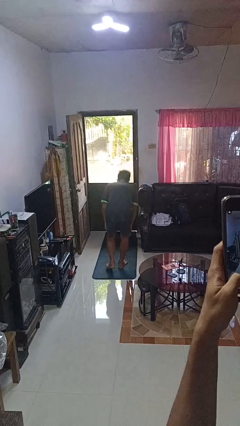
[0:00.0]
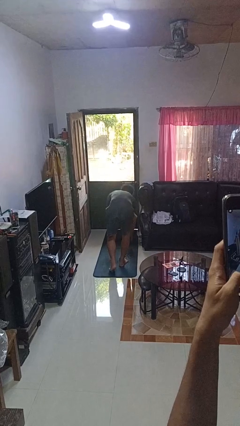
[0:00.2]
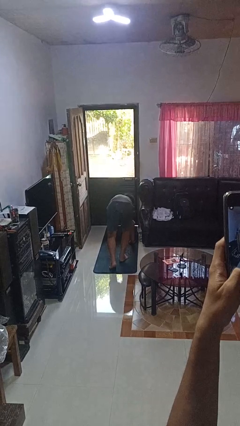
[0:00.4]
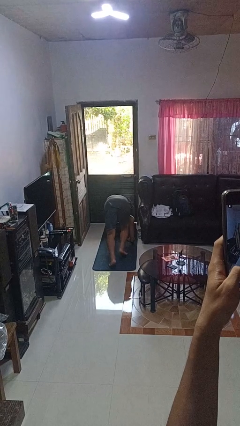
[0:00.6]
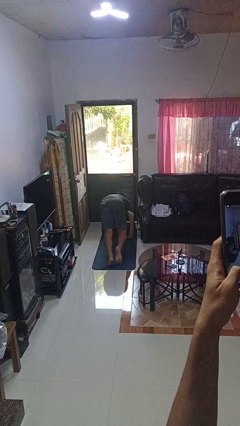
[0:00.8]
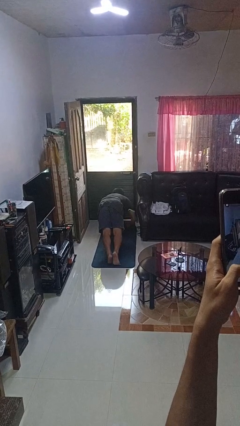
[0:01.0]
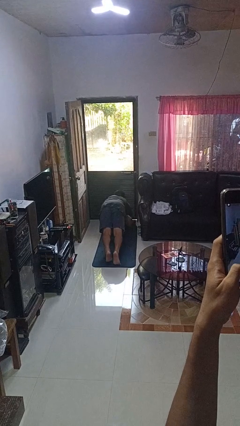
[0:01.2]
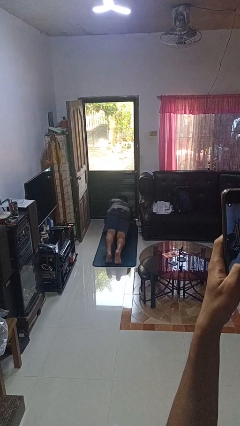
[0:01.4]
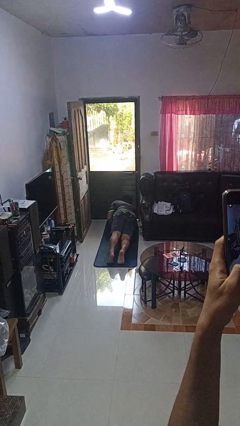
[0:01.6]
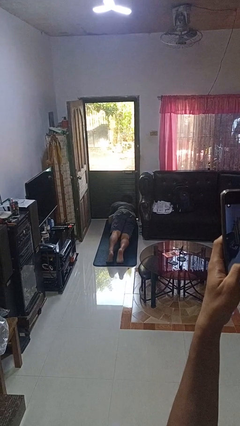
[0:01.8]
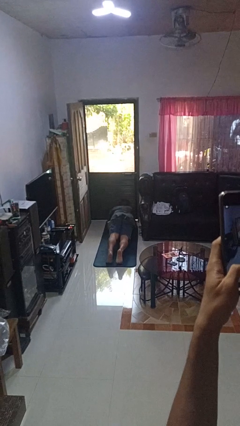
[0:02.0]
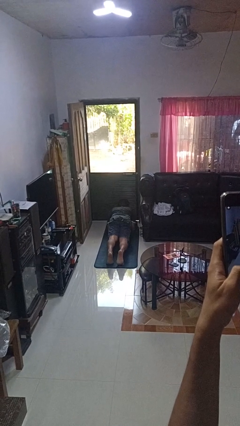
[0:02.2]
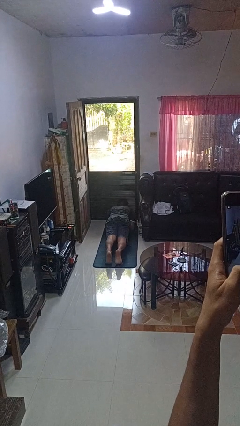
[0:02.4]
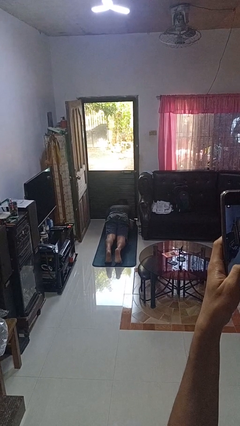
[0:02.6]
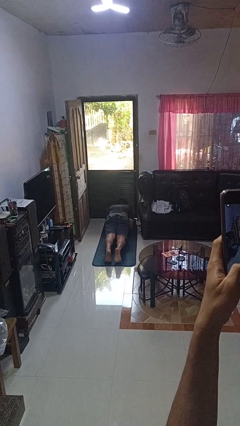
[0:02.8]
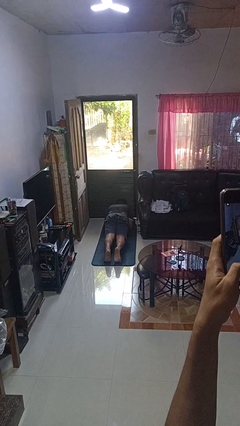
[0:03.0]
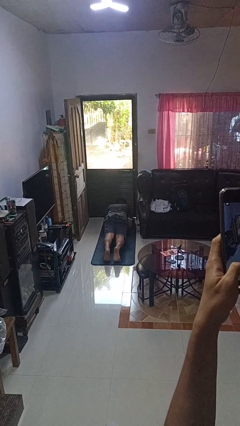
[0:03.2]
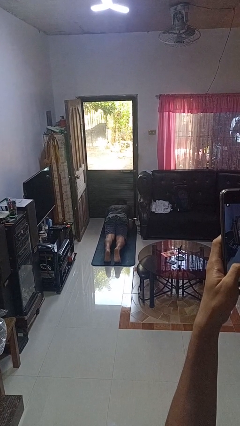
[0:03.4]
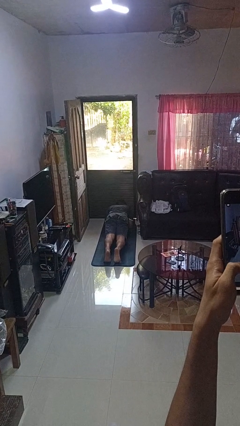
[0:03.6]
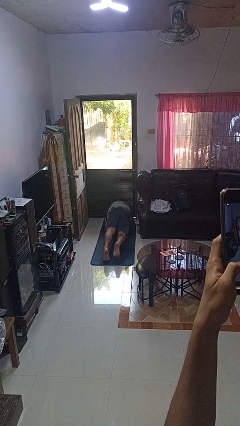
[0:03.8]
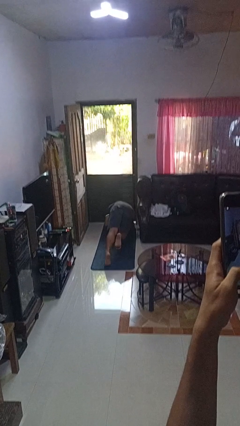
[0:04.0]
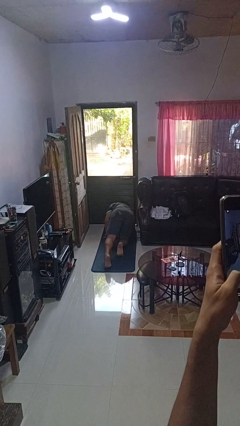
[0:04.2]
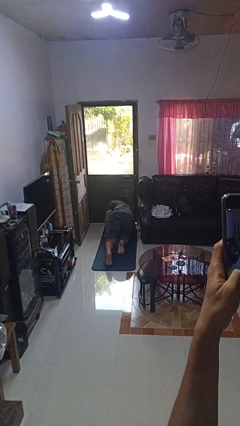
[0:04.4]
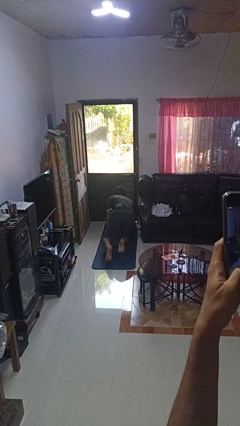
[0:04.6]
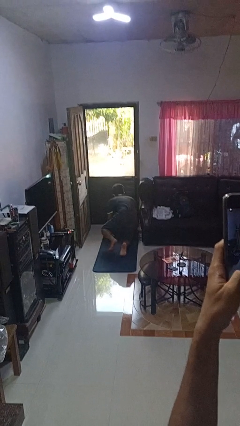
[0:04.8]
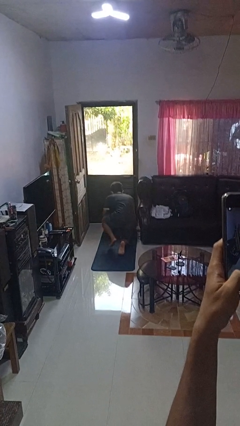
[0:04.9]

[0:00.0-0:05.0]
person exercises with plank

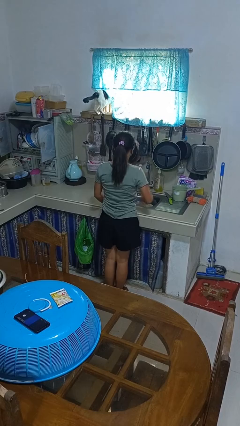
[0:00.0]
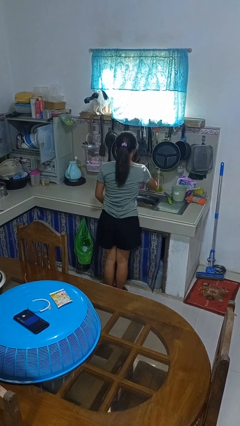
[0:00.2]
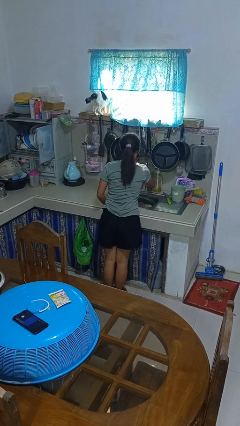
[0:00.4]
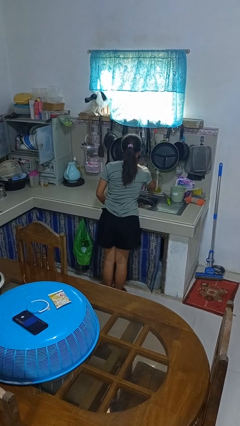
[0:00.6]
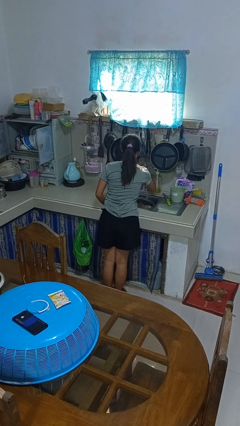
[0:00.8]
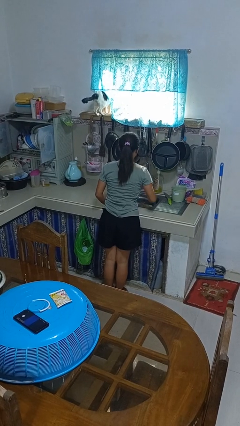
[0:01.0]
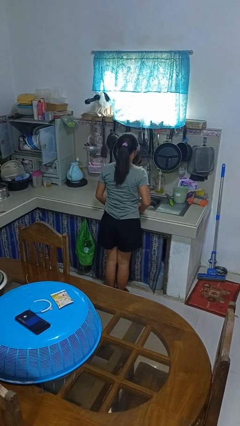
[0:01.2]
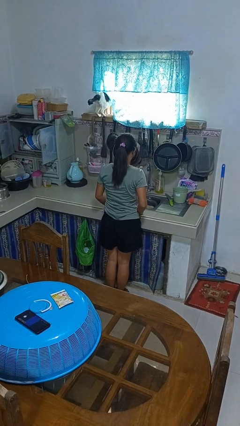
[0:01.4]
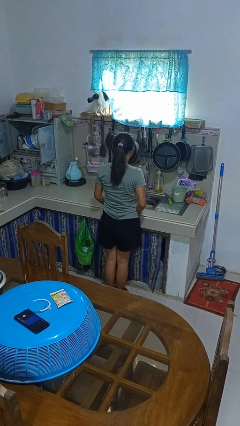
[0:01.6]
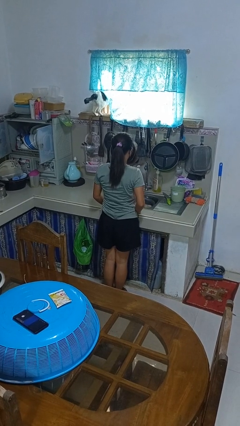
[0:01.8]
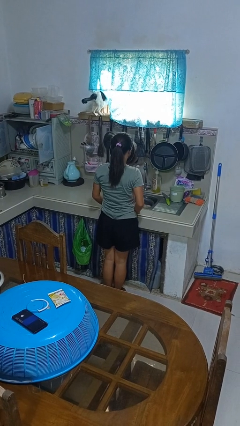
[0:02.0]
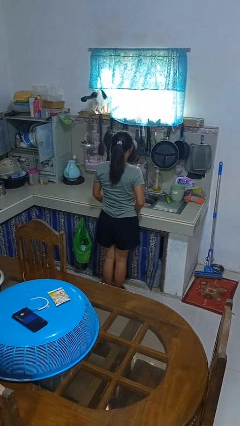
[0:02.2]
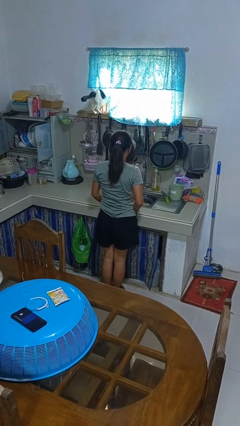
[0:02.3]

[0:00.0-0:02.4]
person turns on faucet

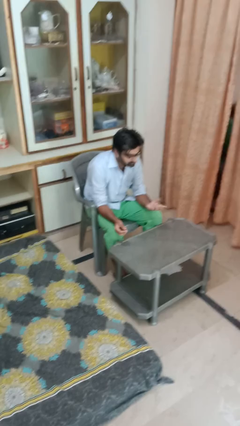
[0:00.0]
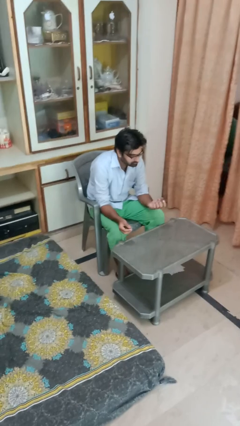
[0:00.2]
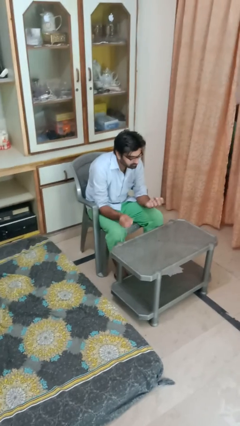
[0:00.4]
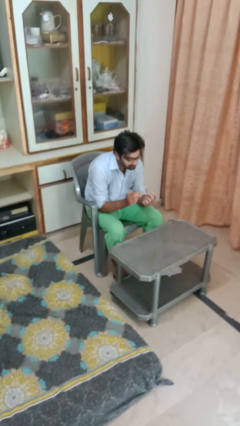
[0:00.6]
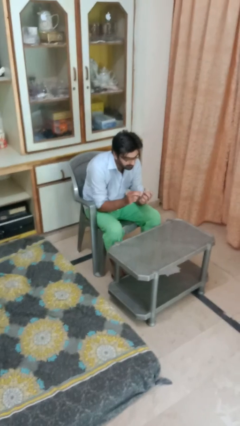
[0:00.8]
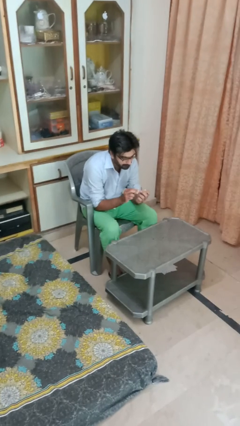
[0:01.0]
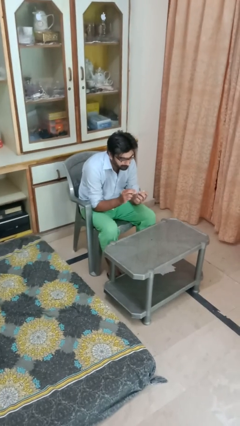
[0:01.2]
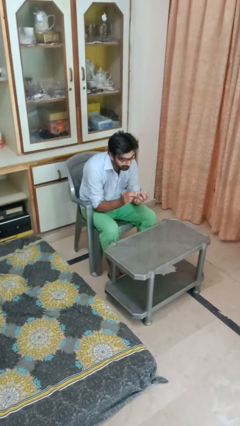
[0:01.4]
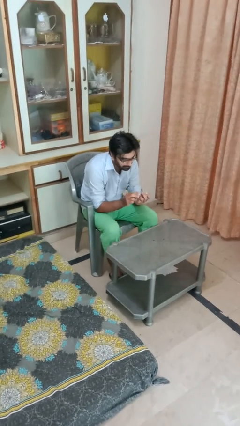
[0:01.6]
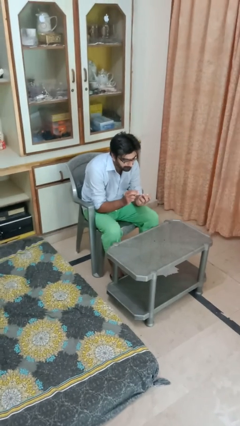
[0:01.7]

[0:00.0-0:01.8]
person files fingernails

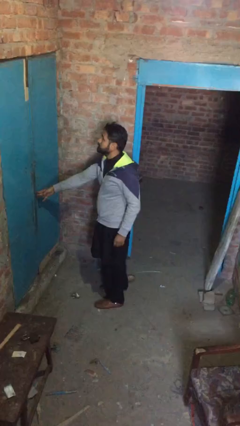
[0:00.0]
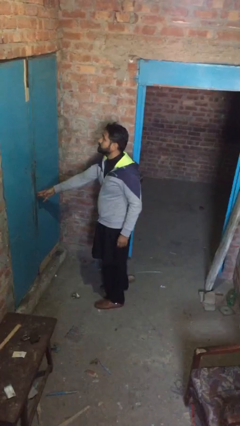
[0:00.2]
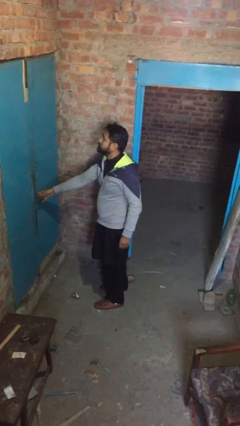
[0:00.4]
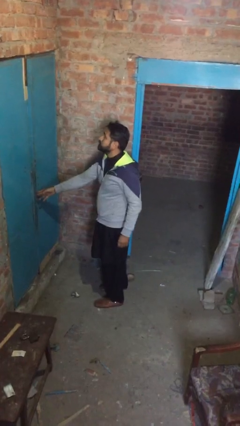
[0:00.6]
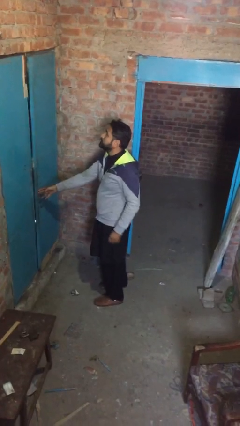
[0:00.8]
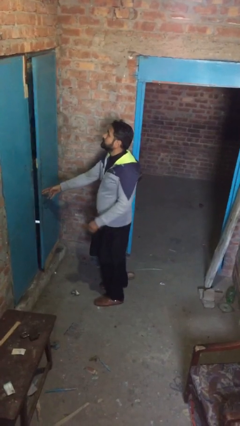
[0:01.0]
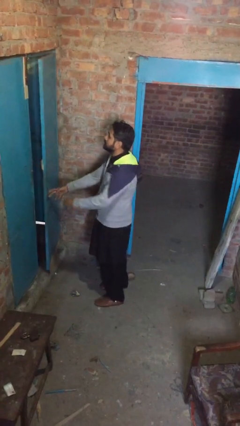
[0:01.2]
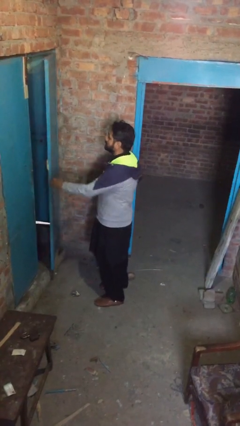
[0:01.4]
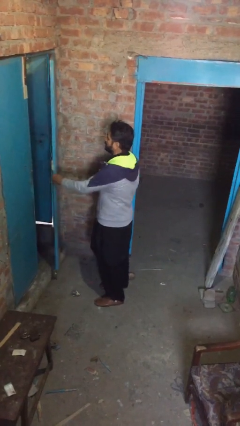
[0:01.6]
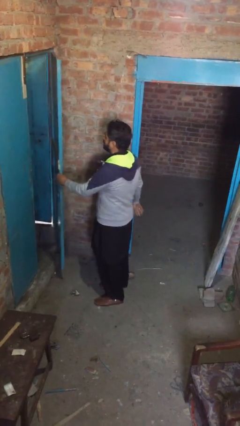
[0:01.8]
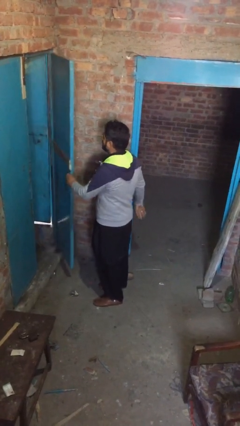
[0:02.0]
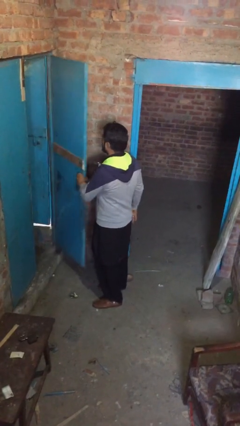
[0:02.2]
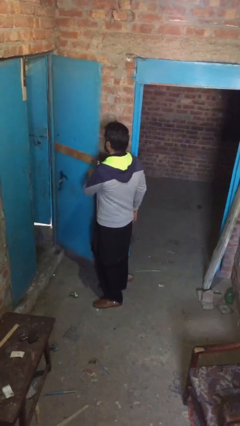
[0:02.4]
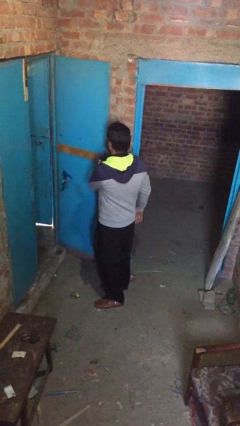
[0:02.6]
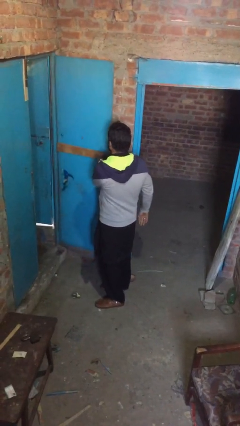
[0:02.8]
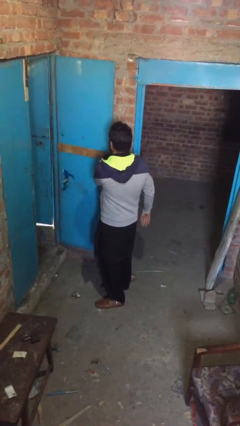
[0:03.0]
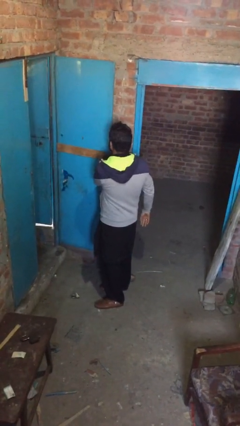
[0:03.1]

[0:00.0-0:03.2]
person opens facility door

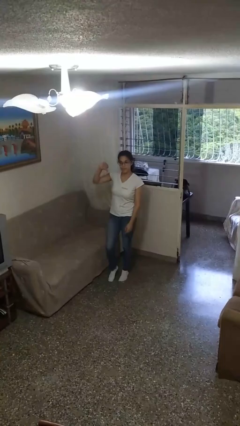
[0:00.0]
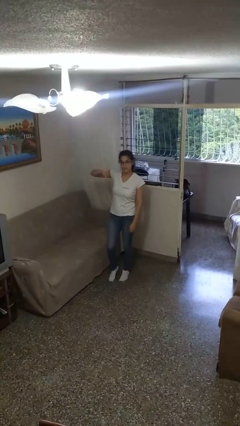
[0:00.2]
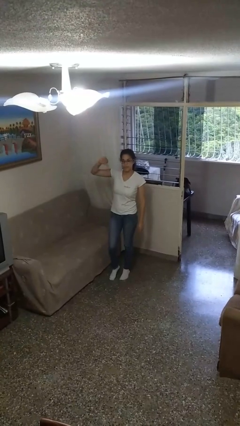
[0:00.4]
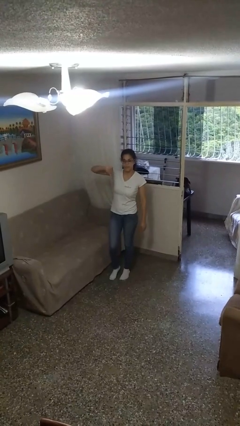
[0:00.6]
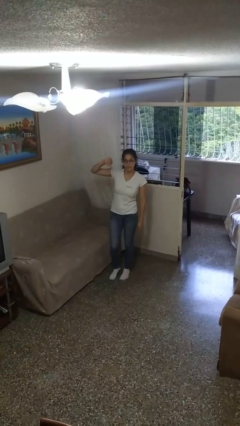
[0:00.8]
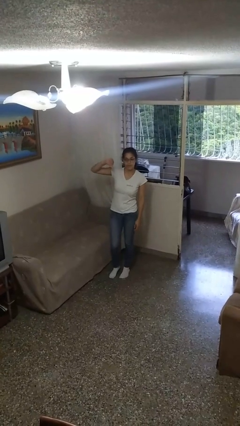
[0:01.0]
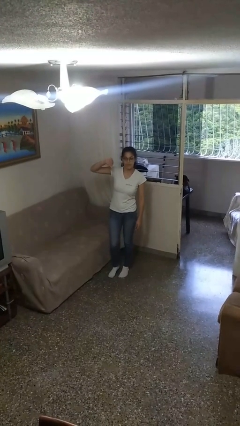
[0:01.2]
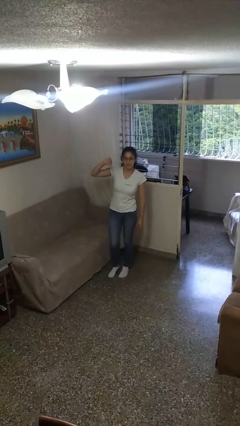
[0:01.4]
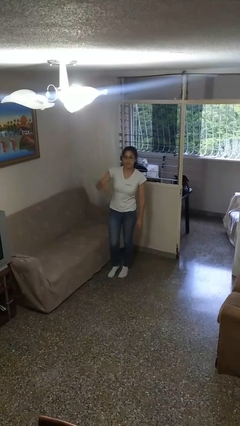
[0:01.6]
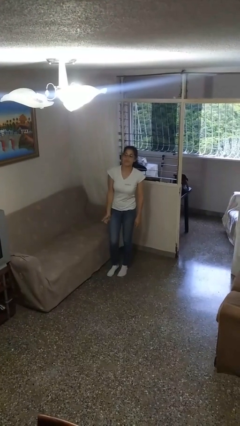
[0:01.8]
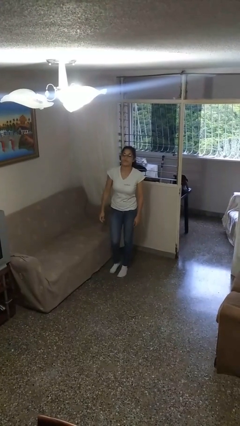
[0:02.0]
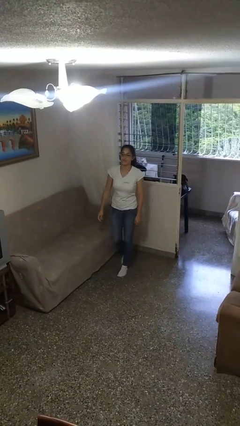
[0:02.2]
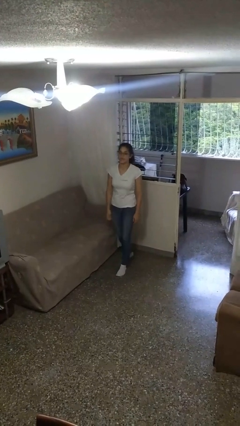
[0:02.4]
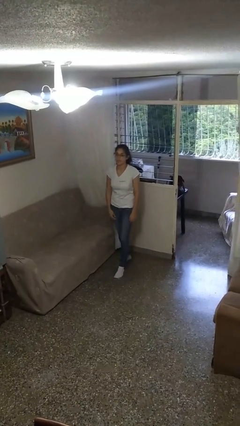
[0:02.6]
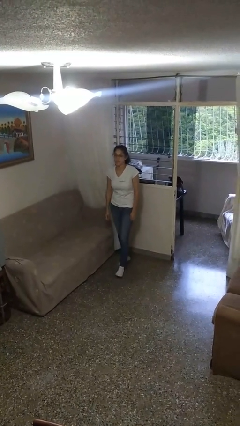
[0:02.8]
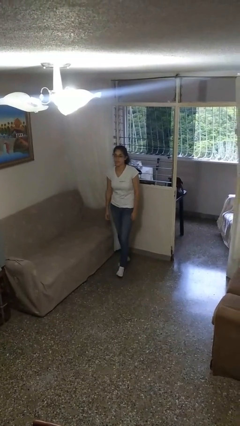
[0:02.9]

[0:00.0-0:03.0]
person gestures thumbs down

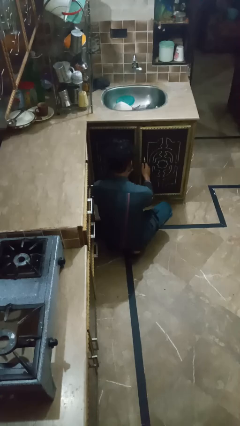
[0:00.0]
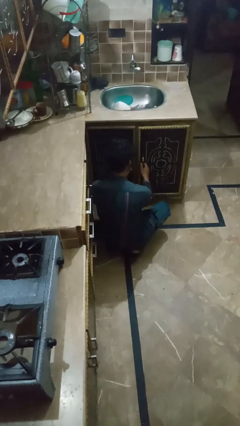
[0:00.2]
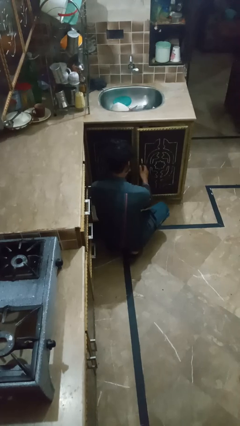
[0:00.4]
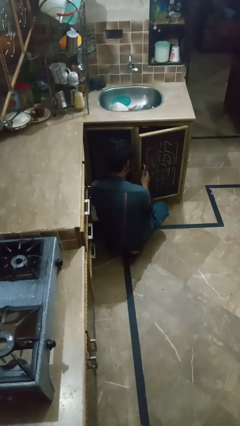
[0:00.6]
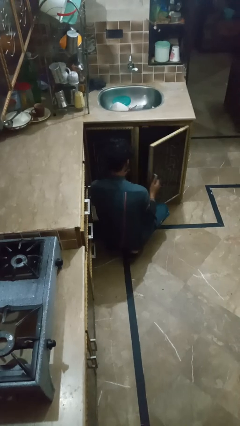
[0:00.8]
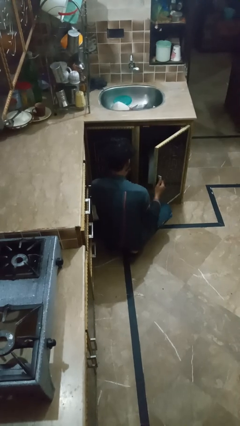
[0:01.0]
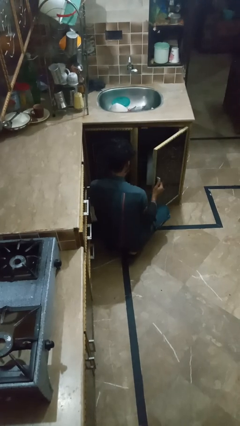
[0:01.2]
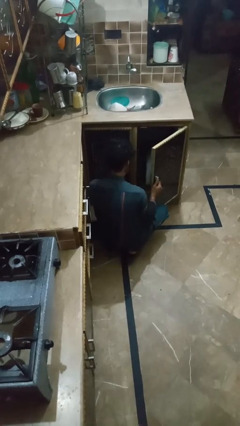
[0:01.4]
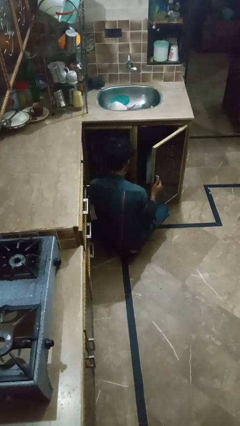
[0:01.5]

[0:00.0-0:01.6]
person opens kitchen drawer

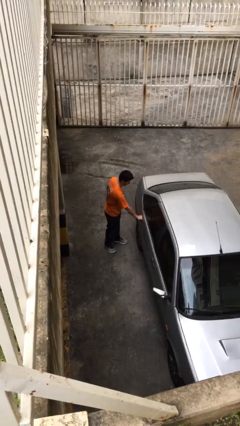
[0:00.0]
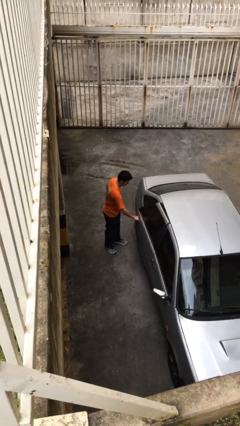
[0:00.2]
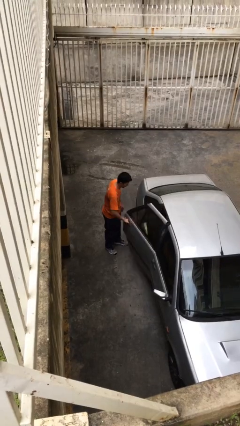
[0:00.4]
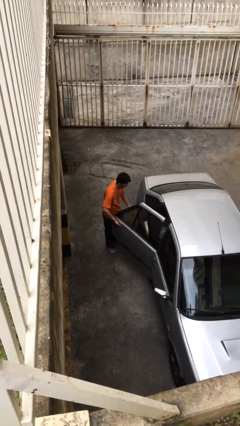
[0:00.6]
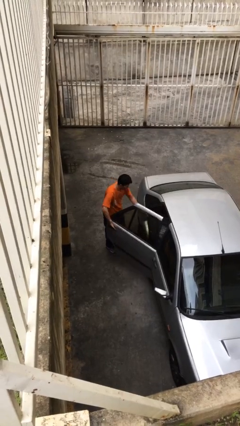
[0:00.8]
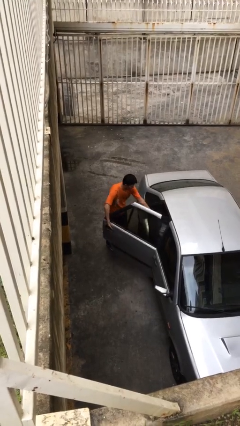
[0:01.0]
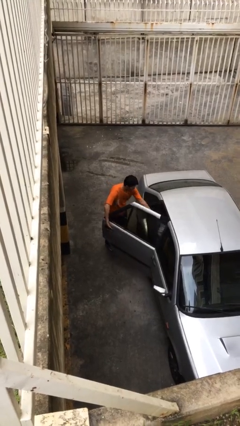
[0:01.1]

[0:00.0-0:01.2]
person opens car door
